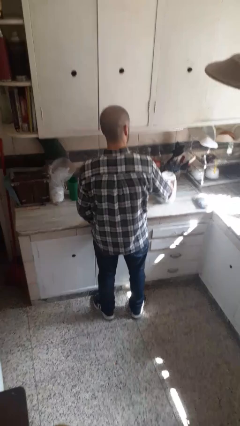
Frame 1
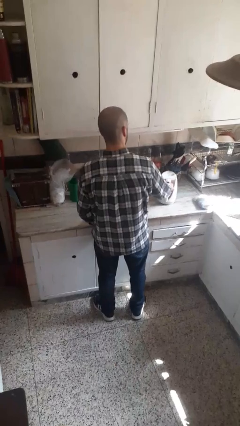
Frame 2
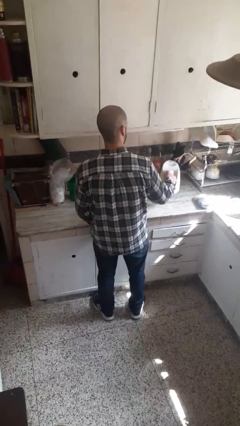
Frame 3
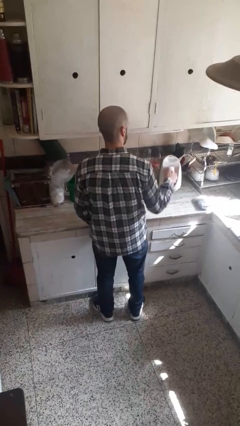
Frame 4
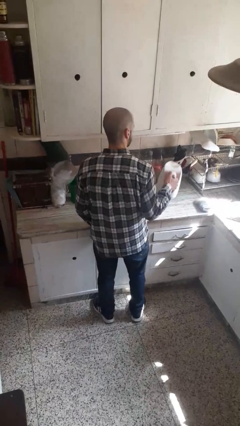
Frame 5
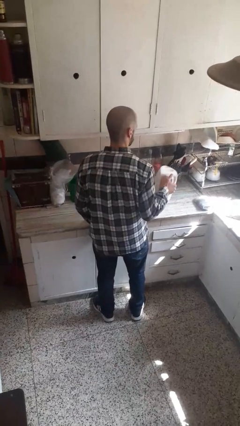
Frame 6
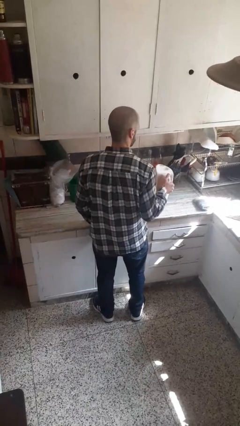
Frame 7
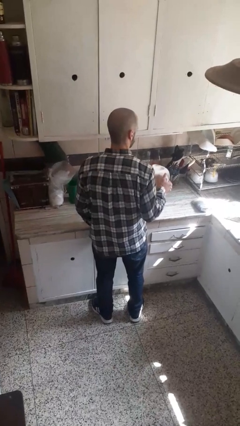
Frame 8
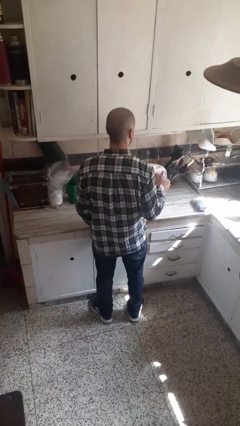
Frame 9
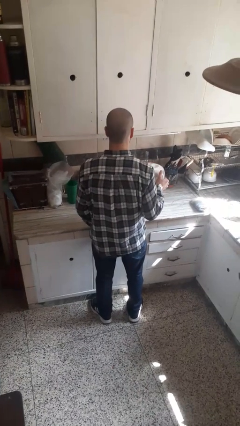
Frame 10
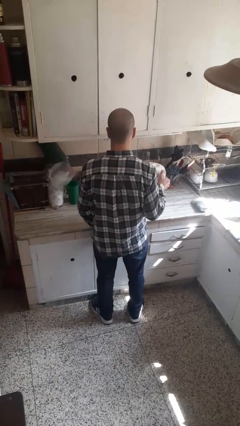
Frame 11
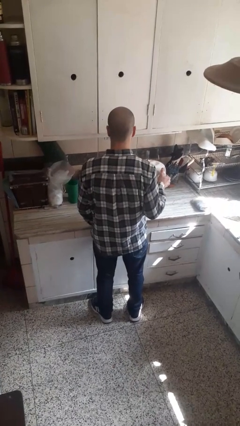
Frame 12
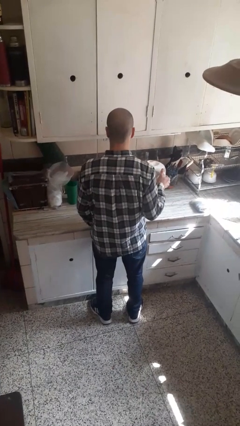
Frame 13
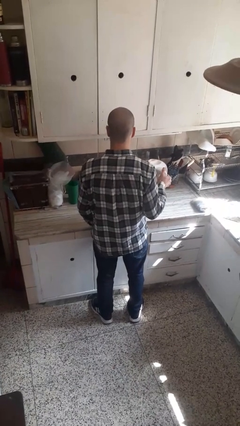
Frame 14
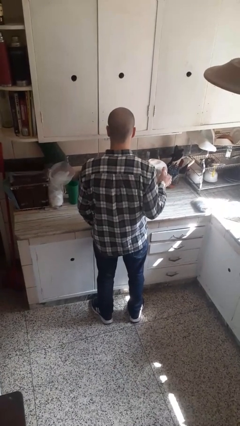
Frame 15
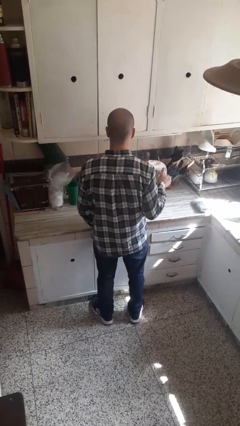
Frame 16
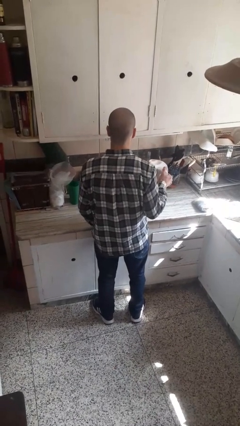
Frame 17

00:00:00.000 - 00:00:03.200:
person picks up object from countertop

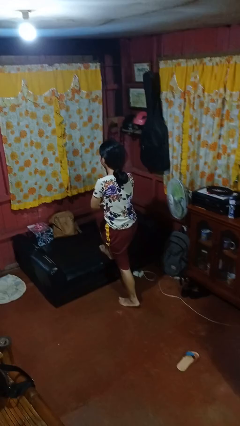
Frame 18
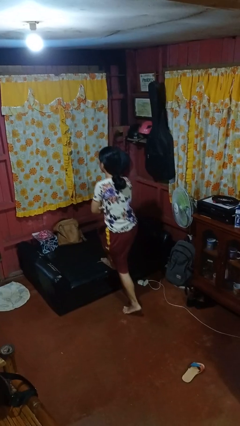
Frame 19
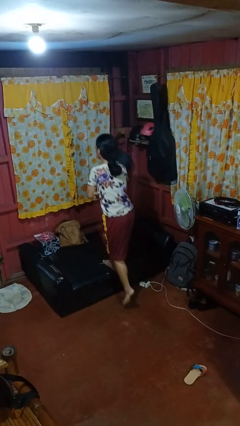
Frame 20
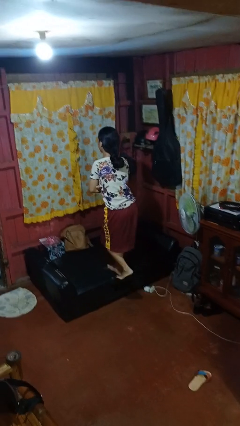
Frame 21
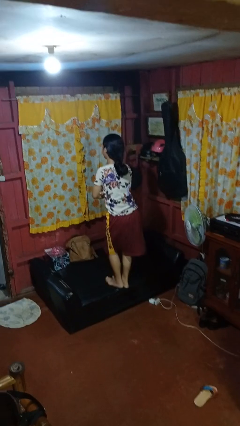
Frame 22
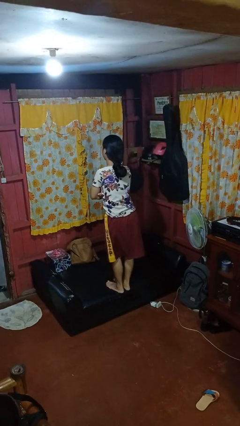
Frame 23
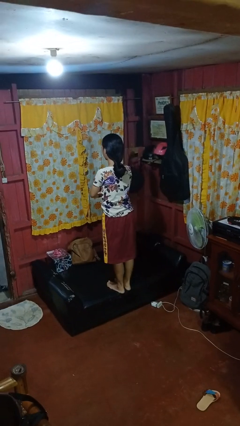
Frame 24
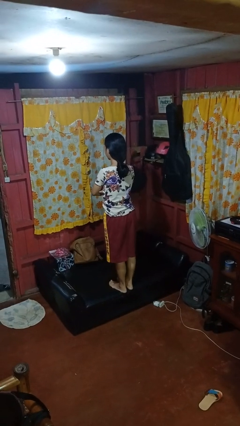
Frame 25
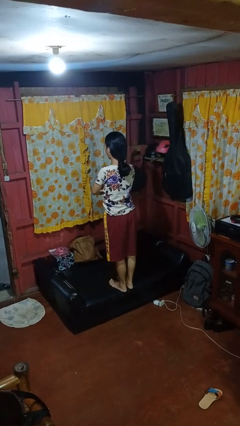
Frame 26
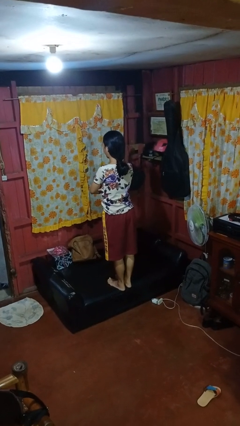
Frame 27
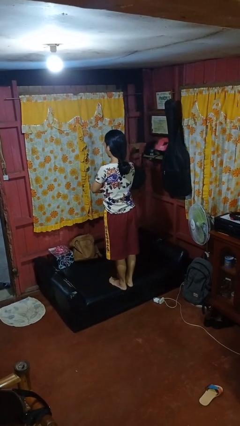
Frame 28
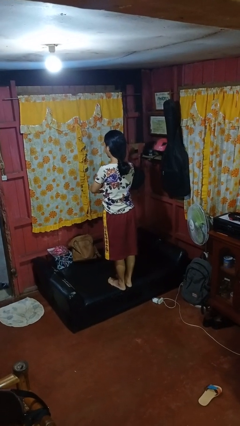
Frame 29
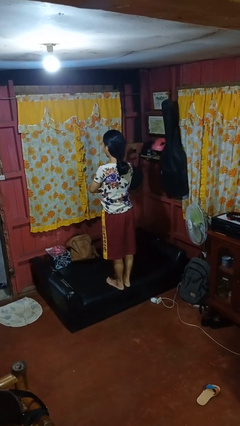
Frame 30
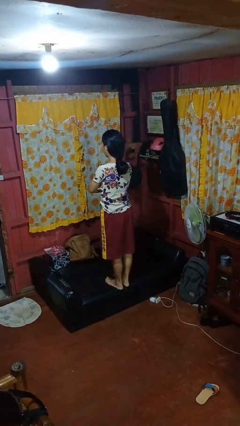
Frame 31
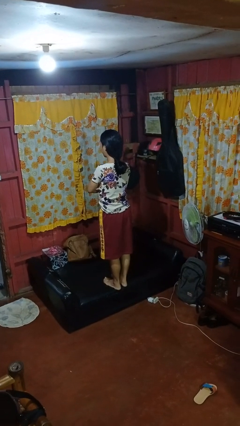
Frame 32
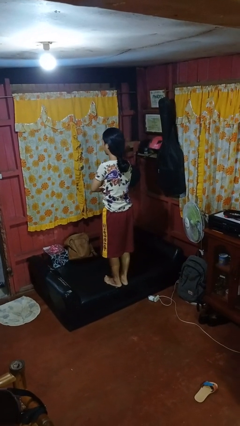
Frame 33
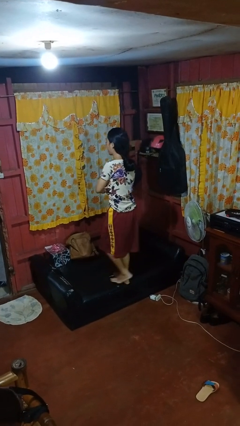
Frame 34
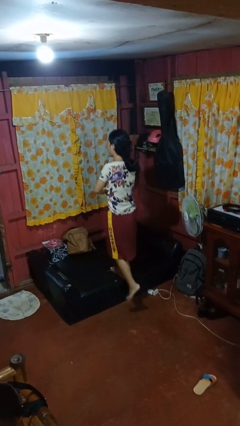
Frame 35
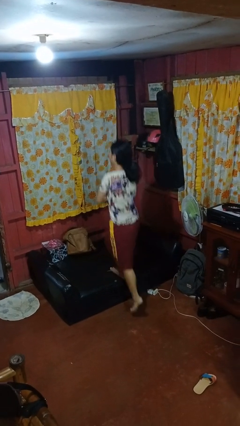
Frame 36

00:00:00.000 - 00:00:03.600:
person climbs on couch

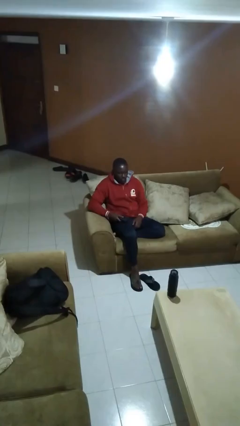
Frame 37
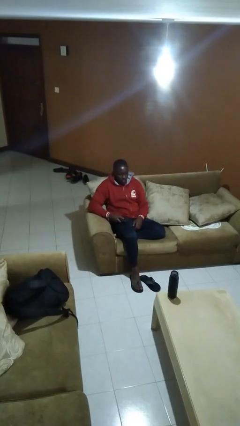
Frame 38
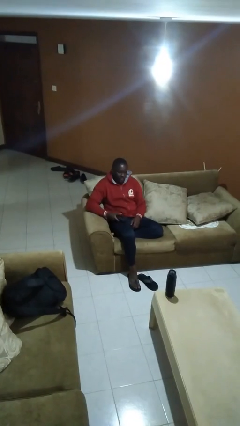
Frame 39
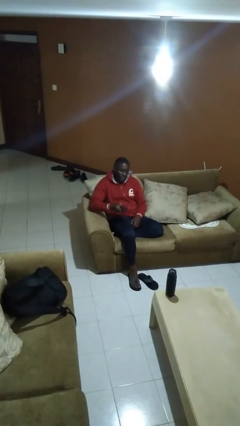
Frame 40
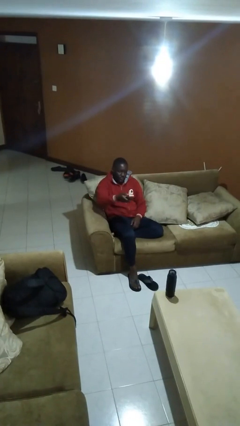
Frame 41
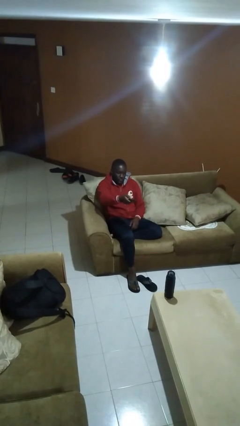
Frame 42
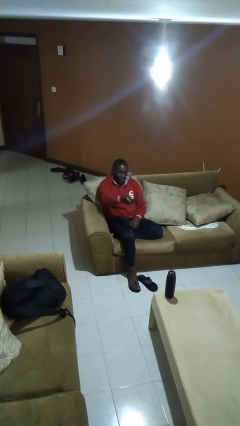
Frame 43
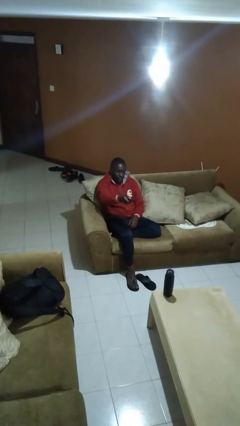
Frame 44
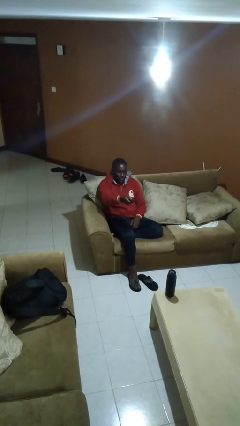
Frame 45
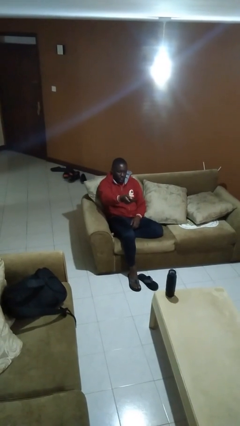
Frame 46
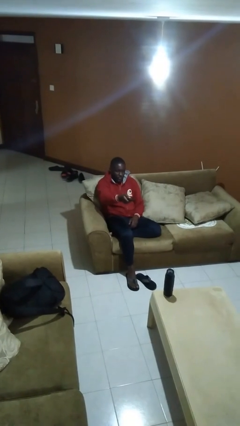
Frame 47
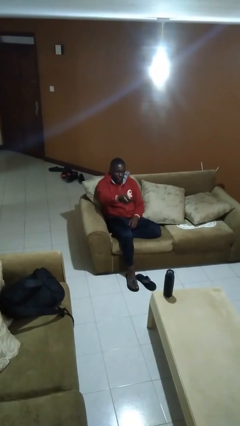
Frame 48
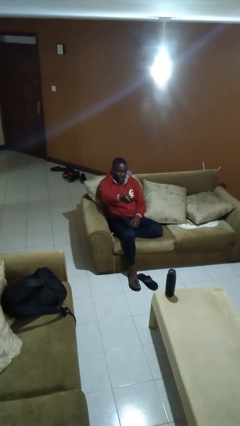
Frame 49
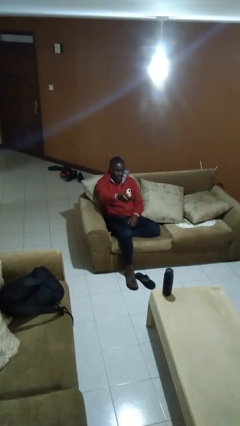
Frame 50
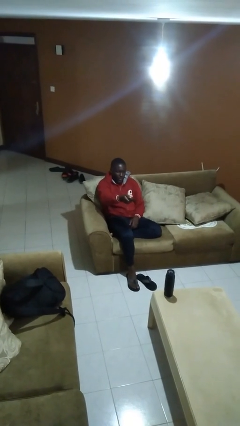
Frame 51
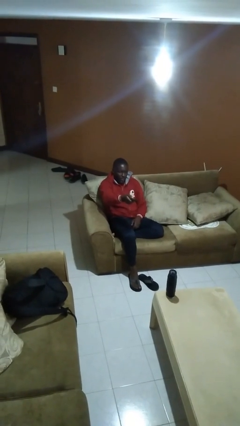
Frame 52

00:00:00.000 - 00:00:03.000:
person uses television remote

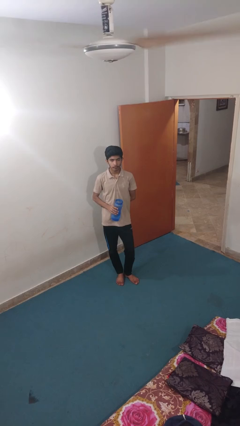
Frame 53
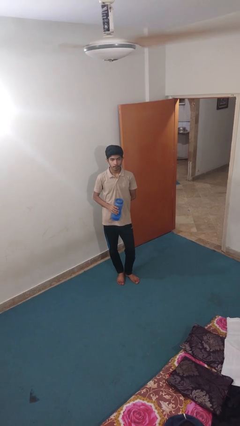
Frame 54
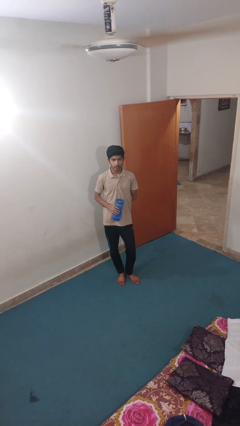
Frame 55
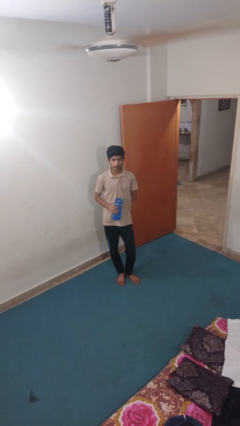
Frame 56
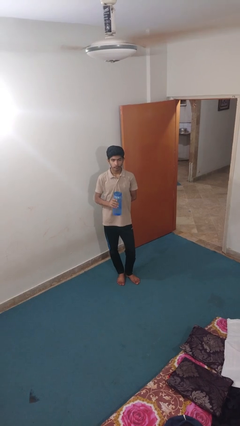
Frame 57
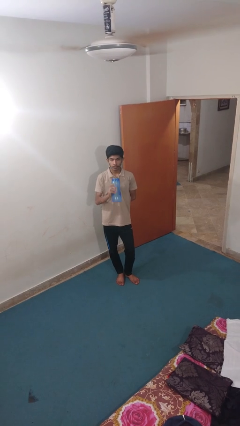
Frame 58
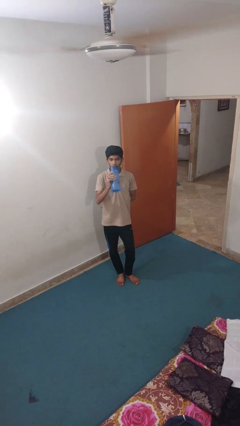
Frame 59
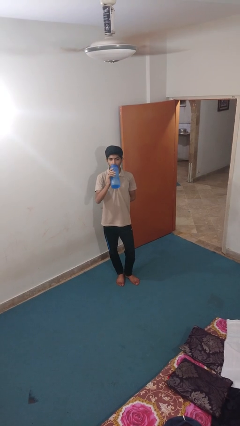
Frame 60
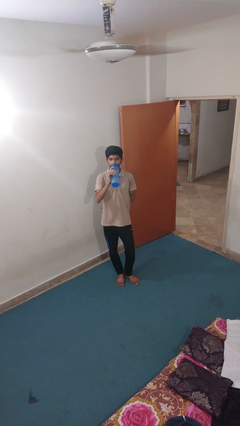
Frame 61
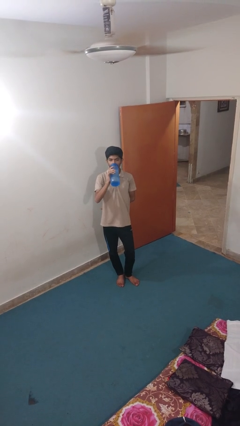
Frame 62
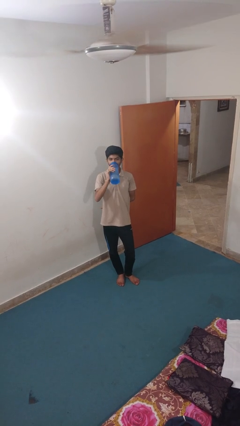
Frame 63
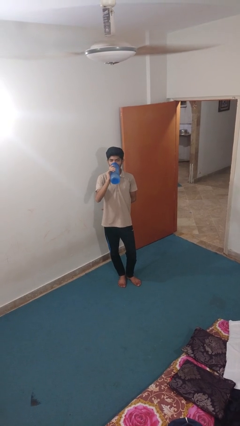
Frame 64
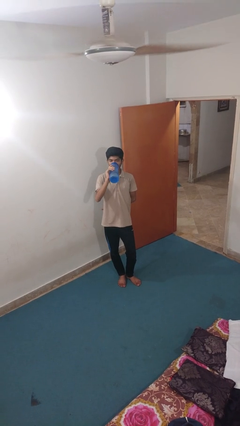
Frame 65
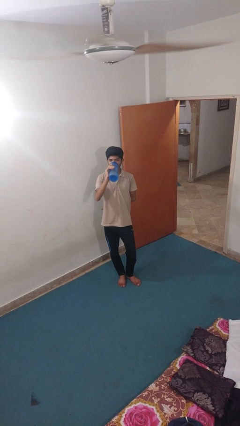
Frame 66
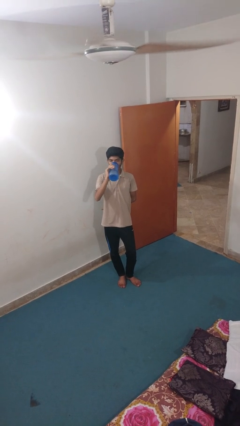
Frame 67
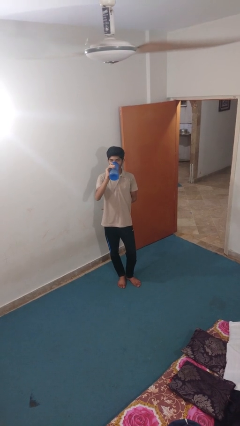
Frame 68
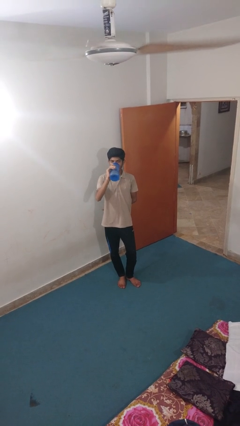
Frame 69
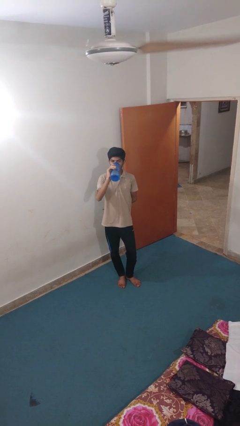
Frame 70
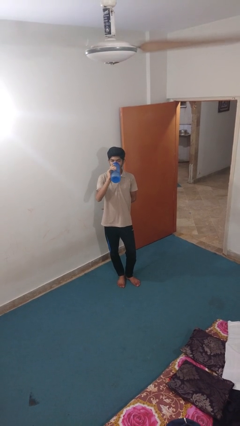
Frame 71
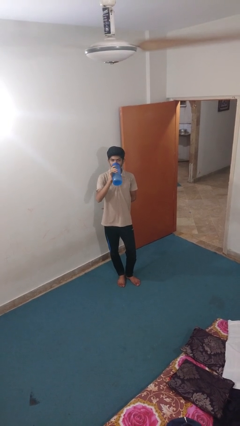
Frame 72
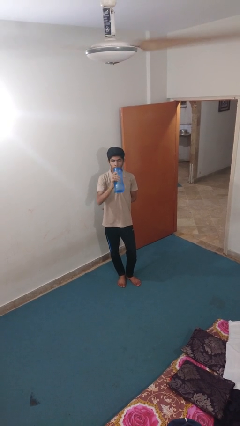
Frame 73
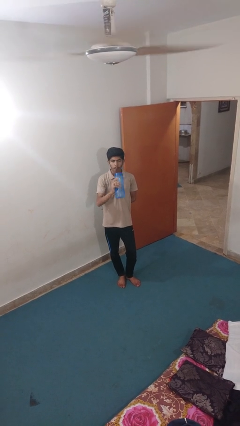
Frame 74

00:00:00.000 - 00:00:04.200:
person drinks from bottle

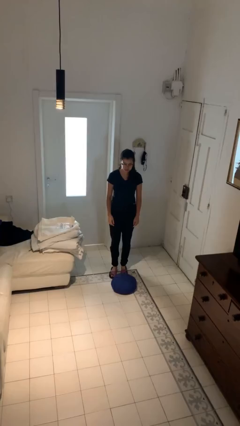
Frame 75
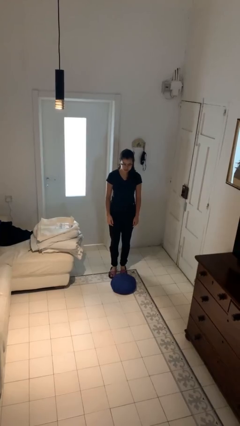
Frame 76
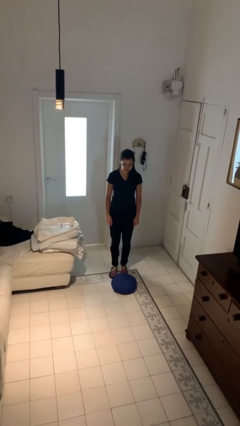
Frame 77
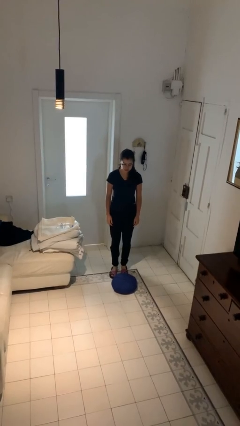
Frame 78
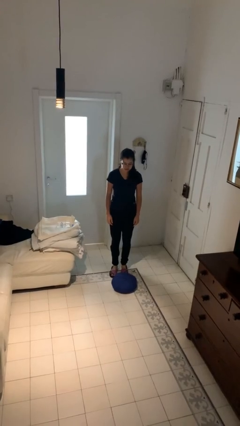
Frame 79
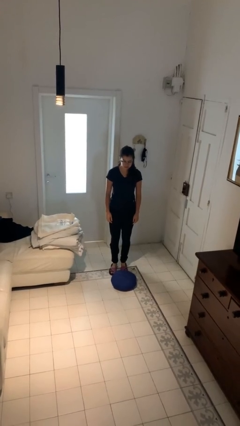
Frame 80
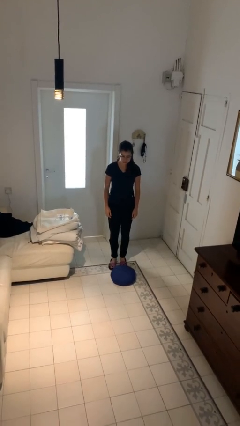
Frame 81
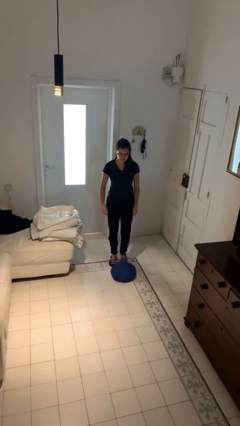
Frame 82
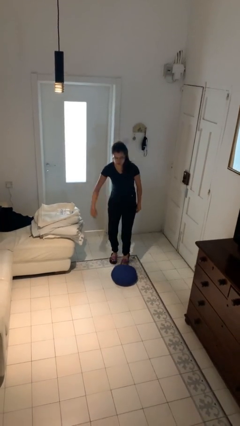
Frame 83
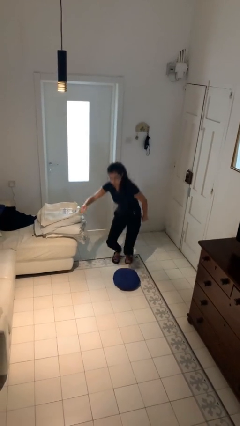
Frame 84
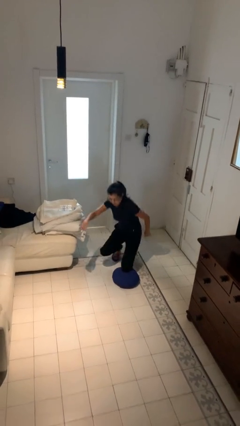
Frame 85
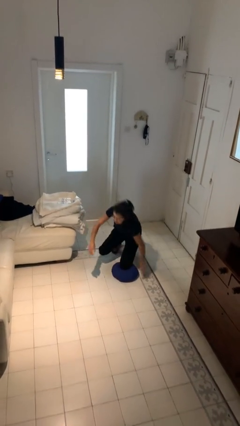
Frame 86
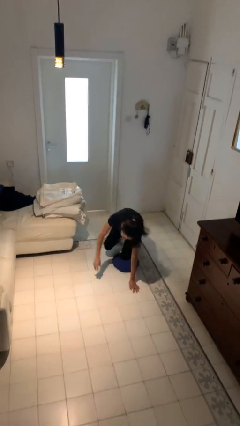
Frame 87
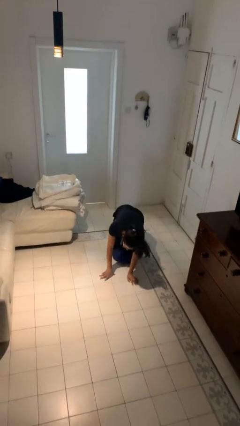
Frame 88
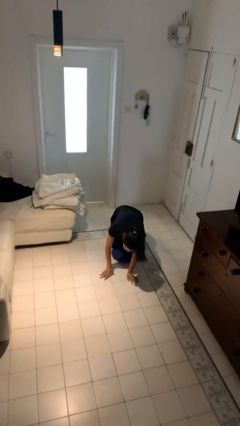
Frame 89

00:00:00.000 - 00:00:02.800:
person trips on object on floor

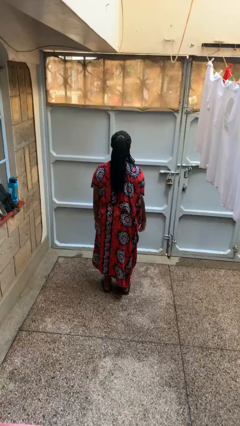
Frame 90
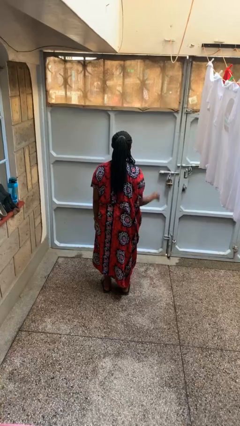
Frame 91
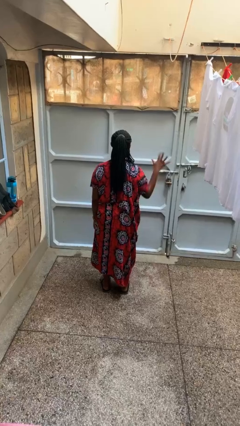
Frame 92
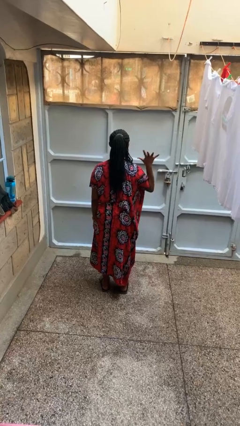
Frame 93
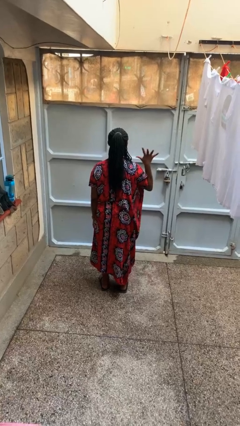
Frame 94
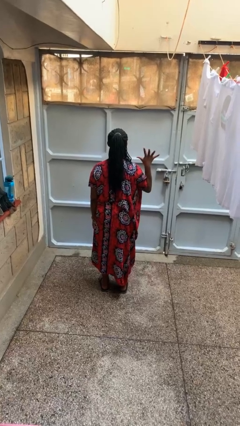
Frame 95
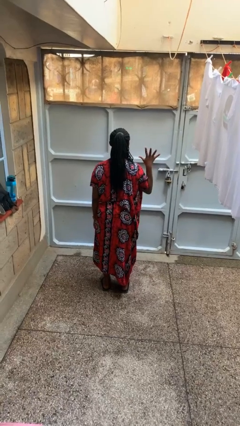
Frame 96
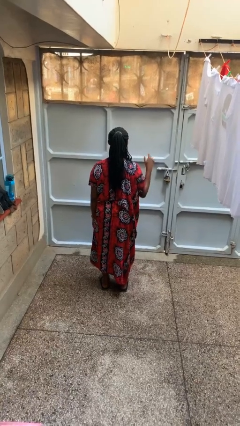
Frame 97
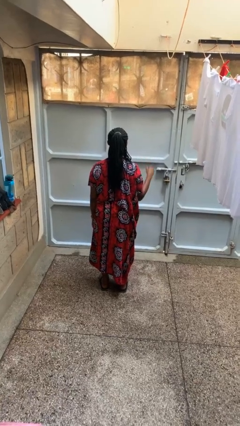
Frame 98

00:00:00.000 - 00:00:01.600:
person gestures number five
